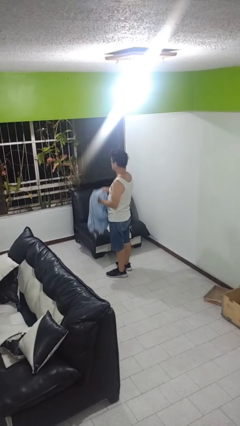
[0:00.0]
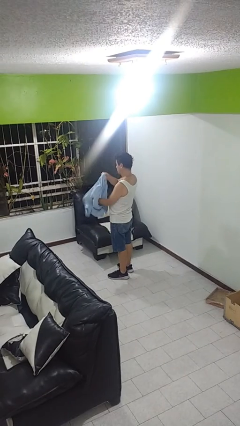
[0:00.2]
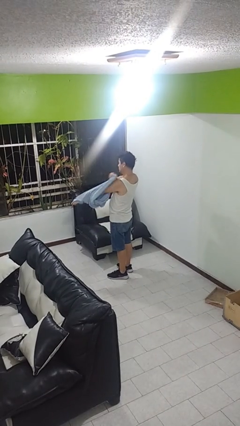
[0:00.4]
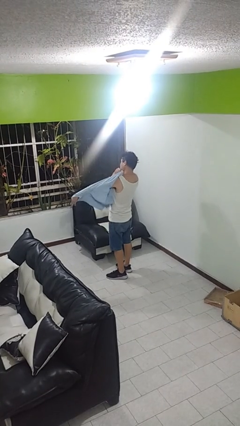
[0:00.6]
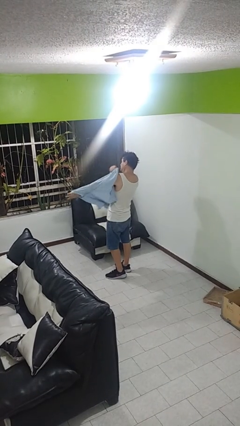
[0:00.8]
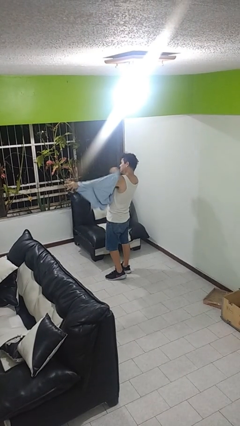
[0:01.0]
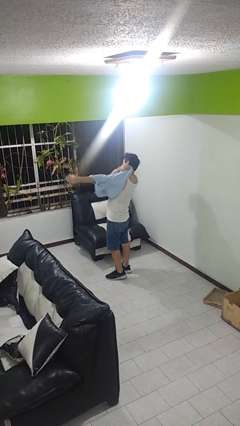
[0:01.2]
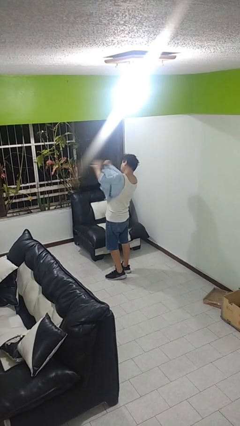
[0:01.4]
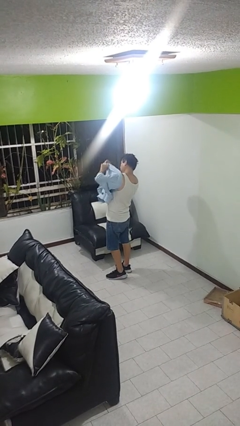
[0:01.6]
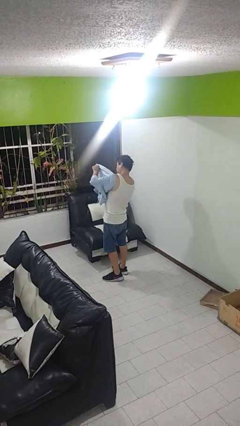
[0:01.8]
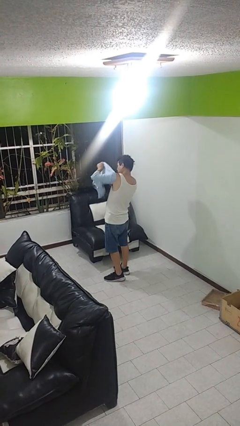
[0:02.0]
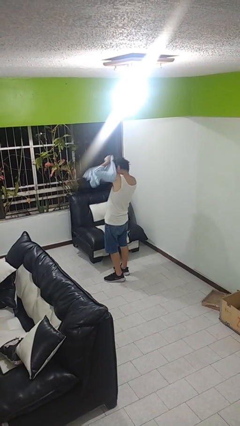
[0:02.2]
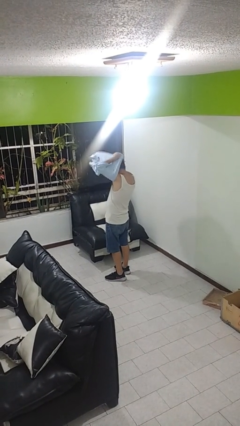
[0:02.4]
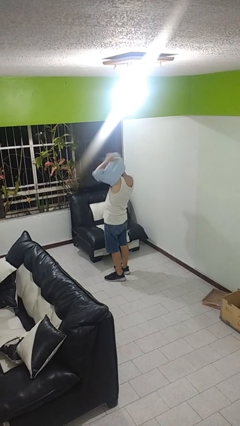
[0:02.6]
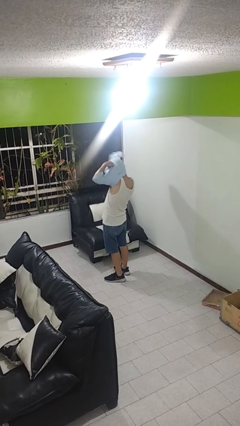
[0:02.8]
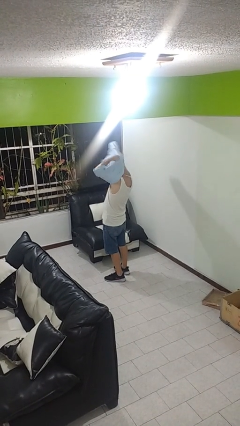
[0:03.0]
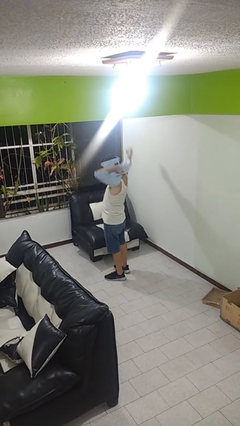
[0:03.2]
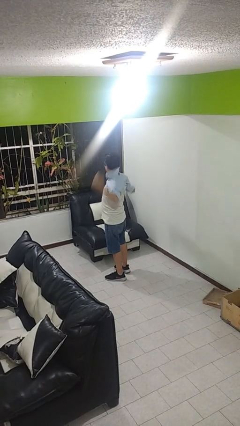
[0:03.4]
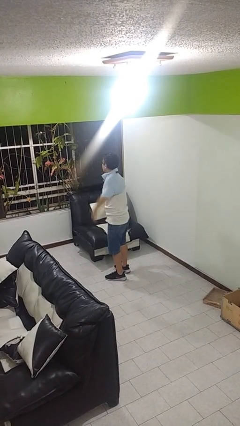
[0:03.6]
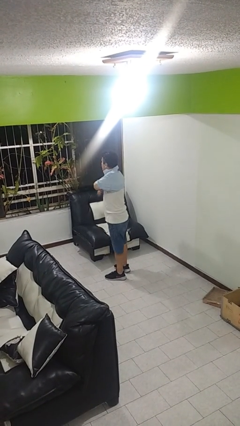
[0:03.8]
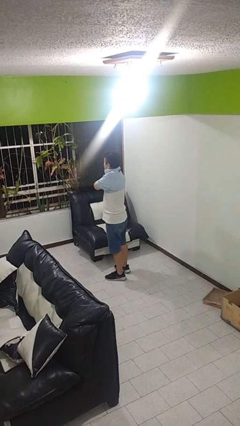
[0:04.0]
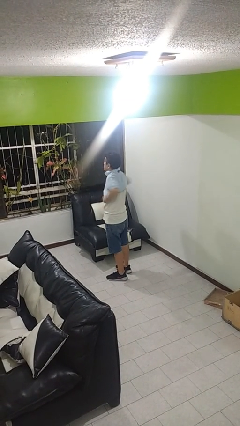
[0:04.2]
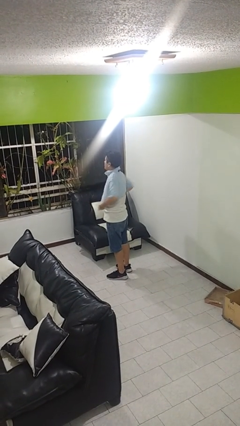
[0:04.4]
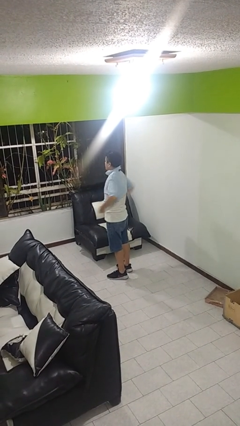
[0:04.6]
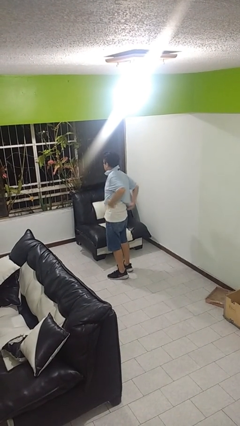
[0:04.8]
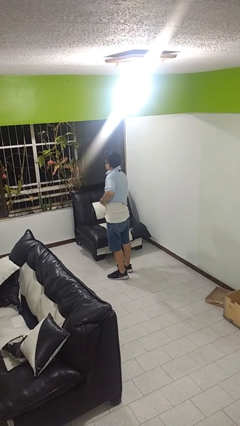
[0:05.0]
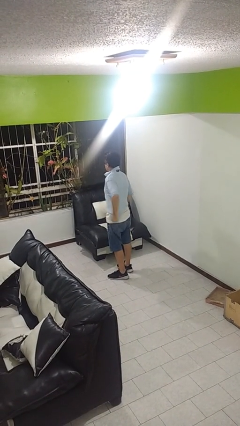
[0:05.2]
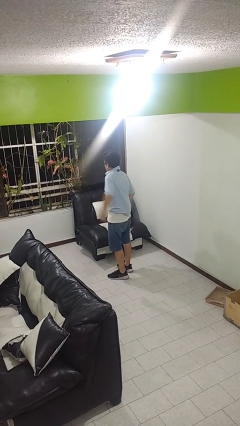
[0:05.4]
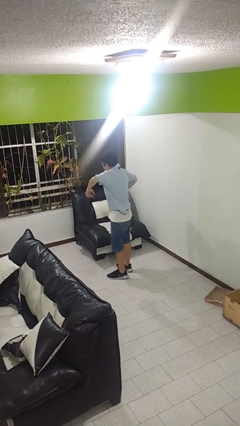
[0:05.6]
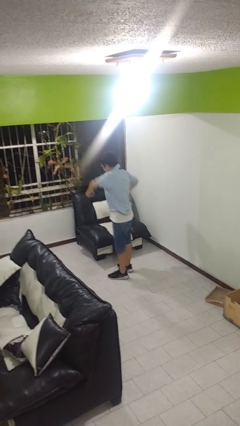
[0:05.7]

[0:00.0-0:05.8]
person puts on shirt

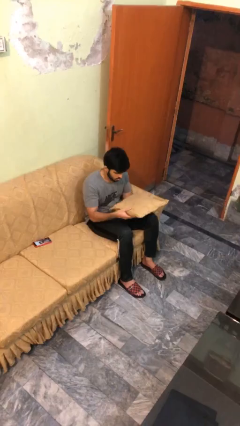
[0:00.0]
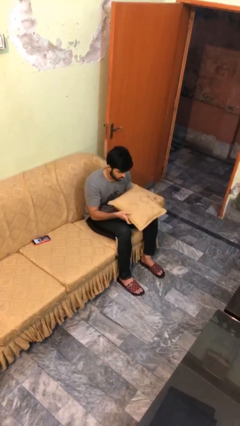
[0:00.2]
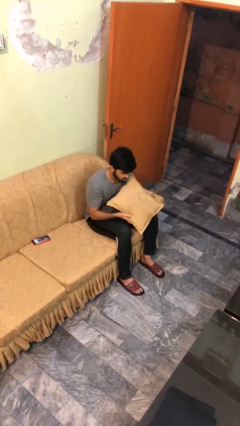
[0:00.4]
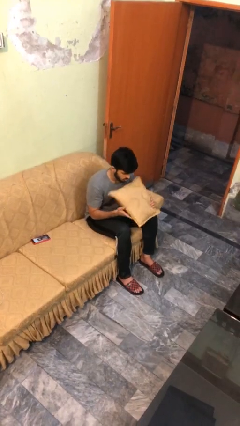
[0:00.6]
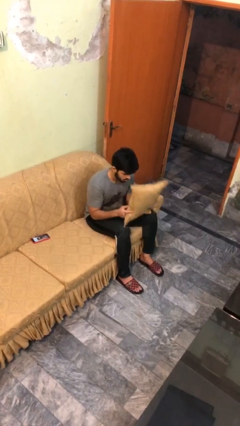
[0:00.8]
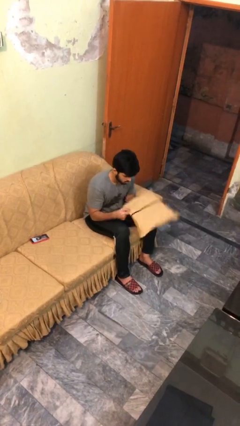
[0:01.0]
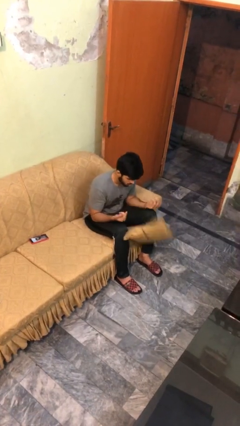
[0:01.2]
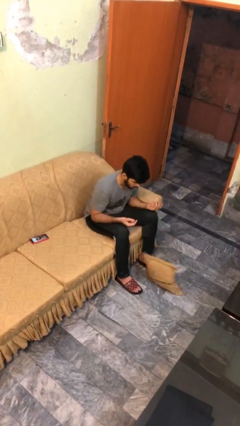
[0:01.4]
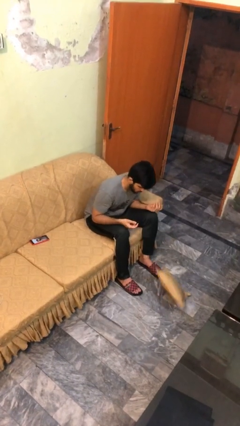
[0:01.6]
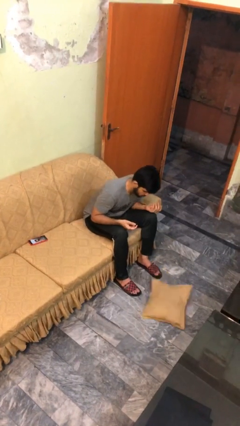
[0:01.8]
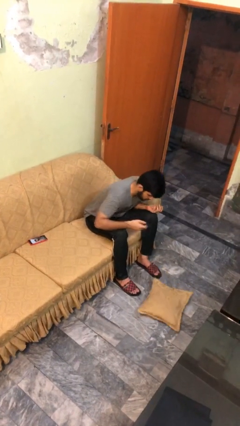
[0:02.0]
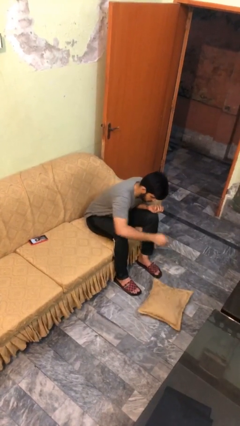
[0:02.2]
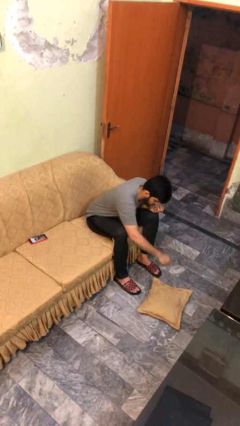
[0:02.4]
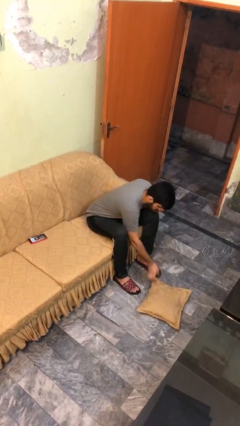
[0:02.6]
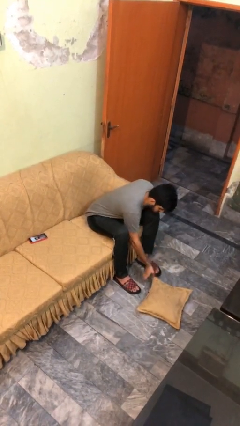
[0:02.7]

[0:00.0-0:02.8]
person drops object

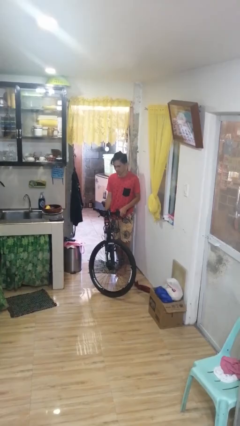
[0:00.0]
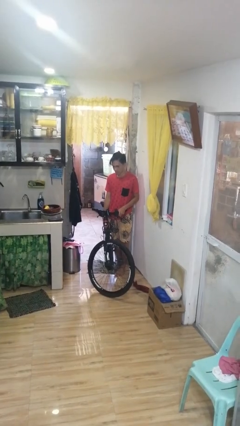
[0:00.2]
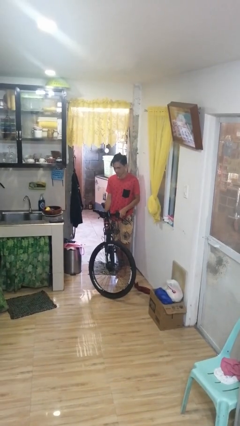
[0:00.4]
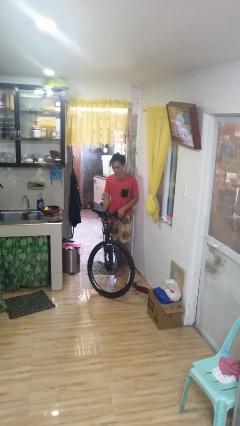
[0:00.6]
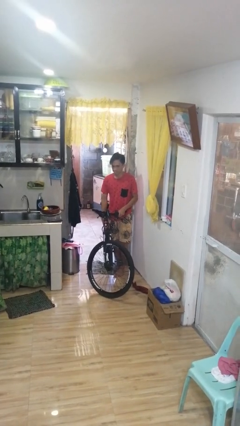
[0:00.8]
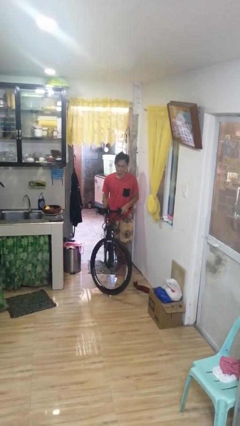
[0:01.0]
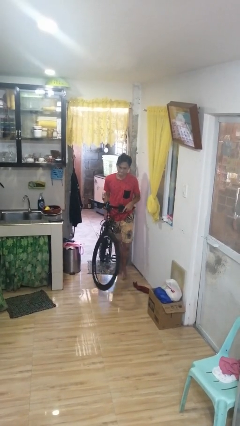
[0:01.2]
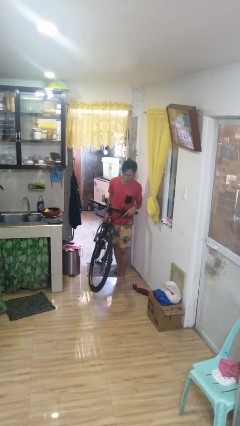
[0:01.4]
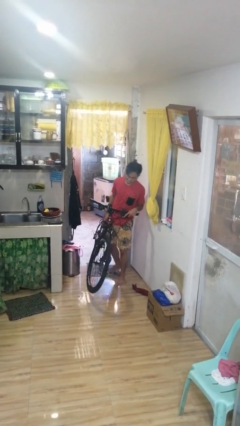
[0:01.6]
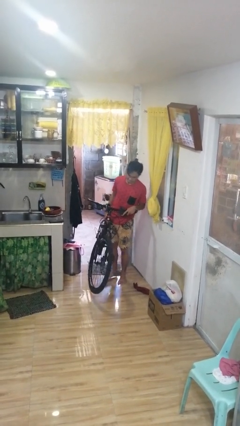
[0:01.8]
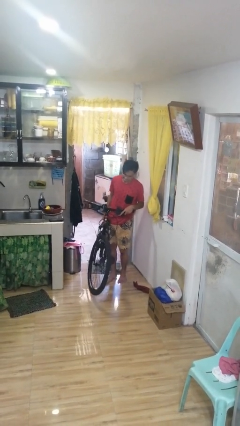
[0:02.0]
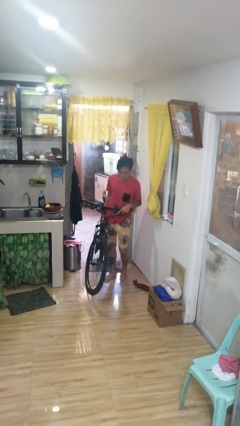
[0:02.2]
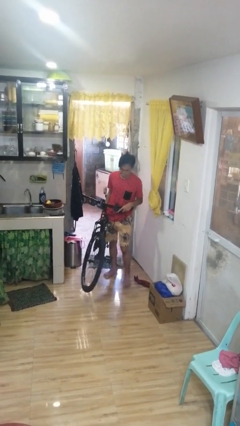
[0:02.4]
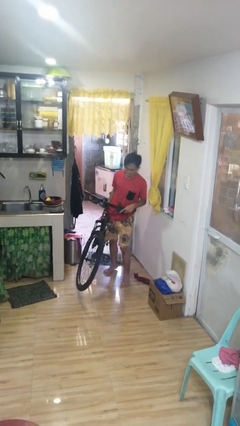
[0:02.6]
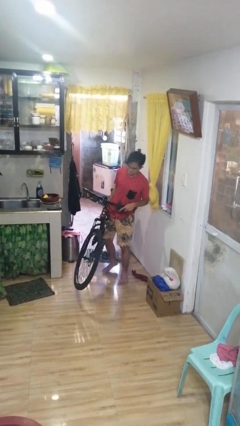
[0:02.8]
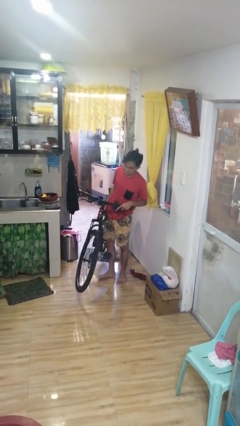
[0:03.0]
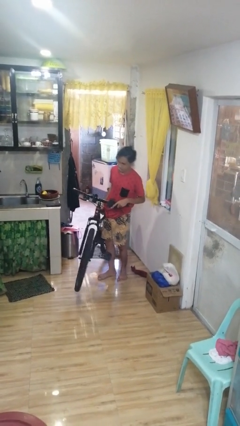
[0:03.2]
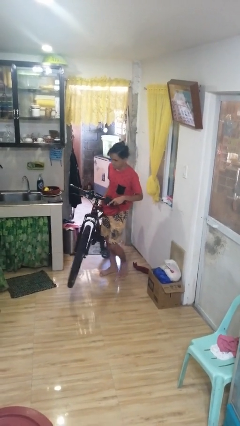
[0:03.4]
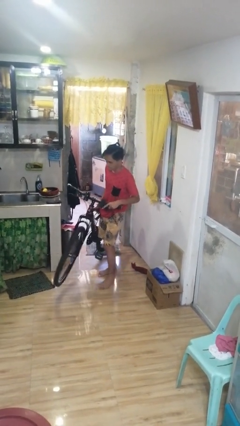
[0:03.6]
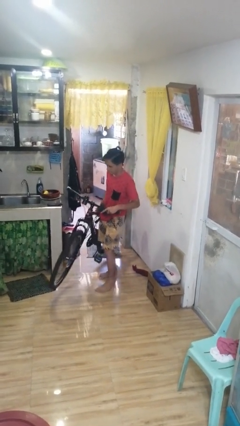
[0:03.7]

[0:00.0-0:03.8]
person carries bicycle

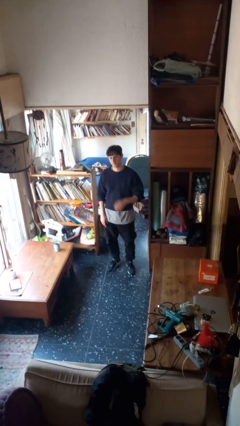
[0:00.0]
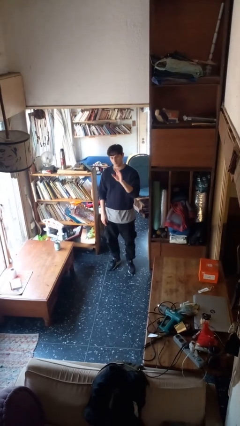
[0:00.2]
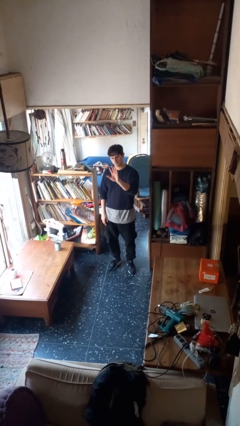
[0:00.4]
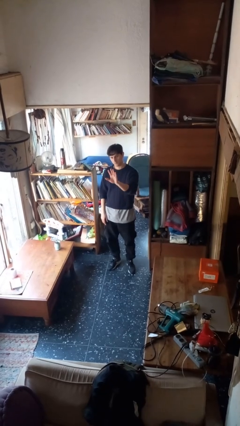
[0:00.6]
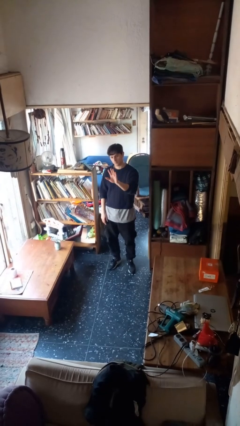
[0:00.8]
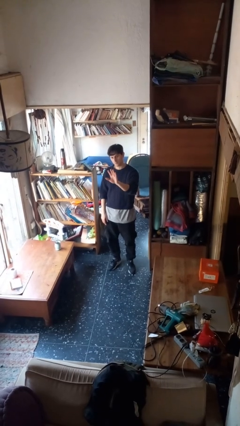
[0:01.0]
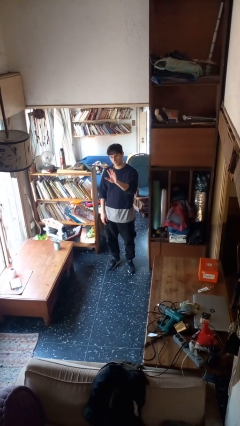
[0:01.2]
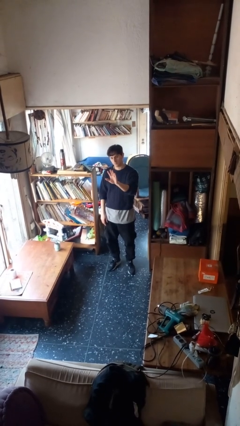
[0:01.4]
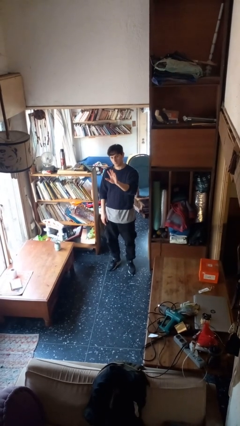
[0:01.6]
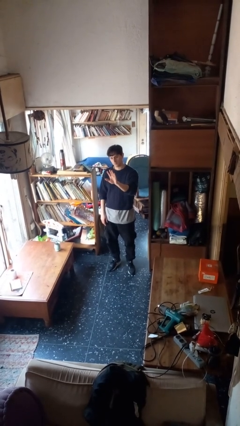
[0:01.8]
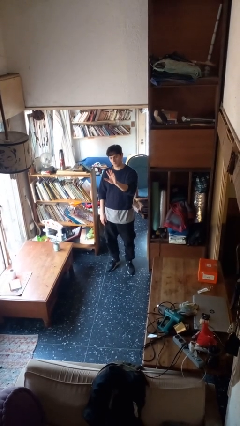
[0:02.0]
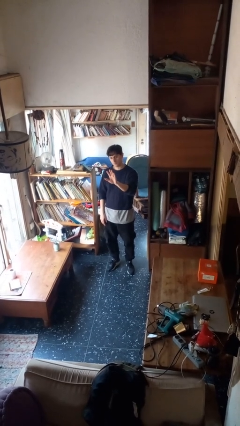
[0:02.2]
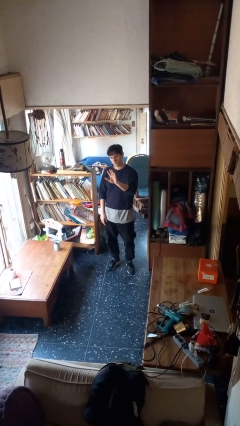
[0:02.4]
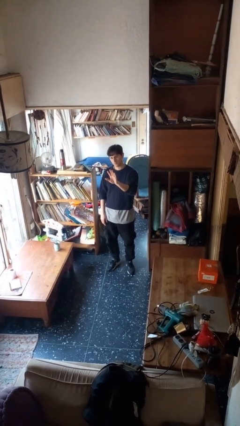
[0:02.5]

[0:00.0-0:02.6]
person gestures number five

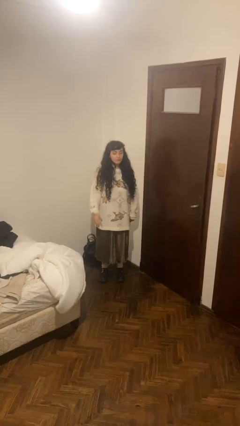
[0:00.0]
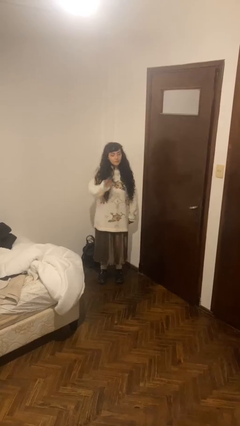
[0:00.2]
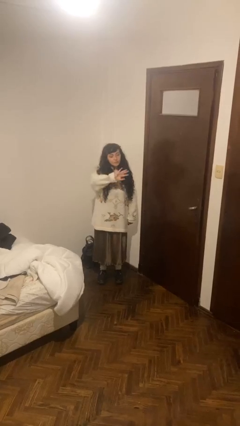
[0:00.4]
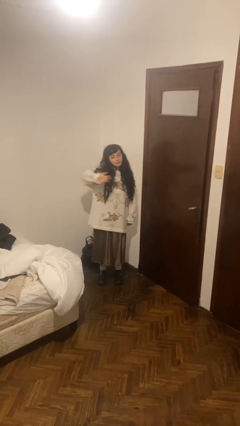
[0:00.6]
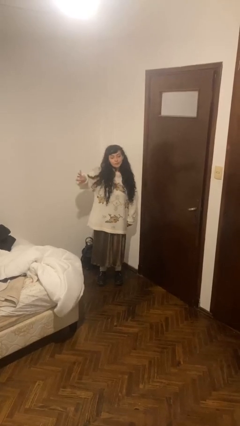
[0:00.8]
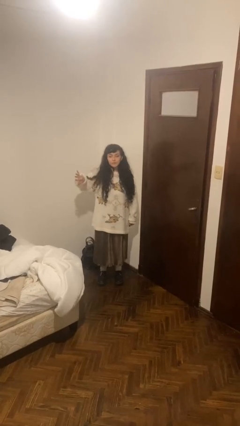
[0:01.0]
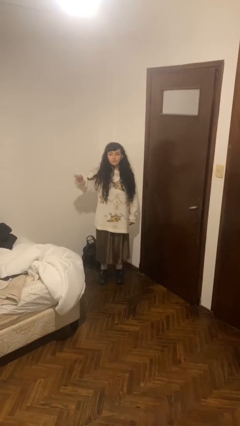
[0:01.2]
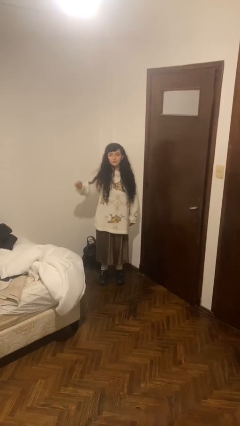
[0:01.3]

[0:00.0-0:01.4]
person gestures swipe right

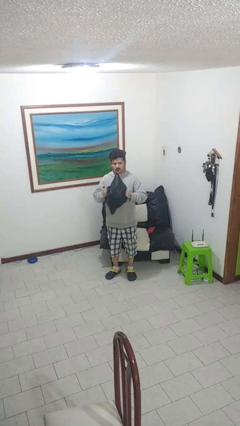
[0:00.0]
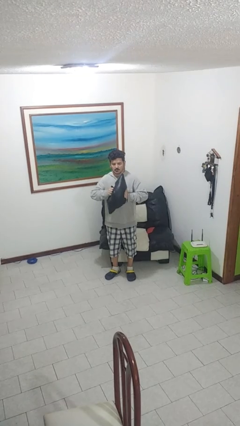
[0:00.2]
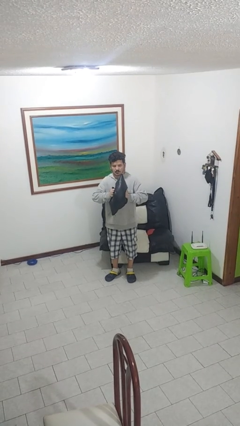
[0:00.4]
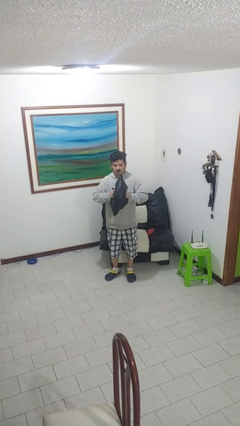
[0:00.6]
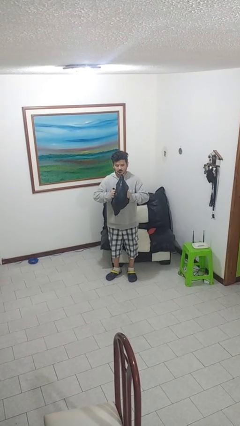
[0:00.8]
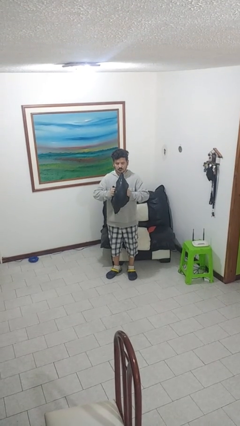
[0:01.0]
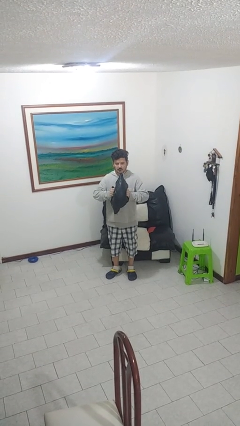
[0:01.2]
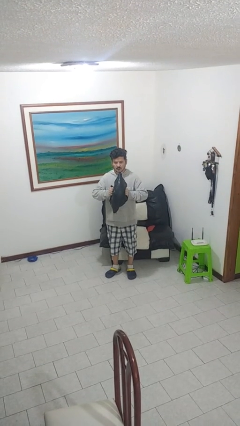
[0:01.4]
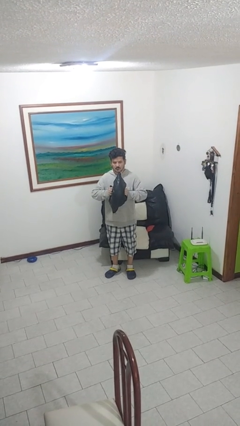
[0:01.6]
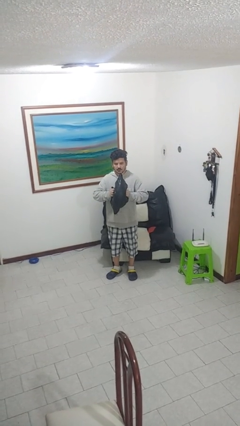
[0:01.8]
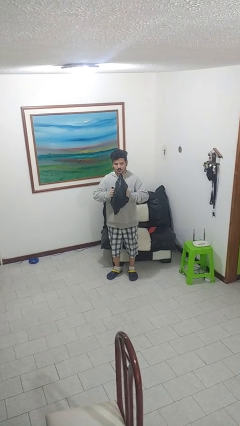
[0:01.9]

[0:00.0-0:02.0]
person squeezes object
